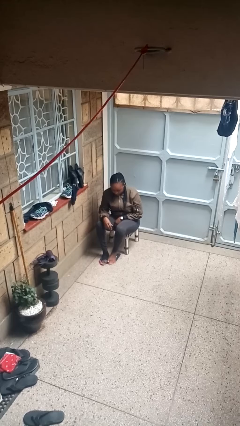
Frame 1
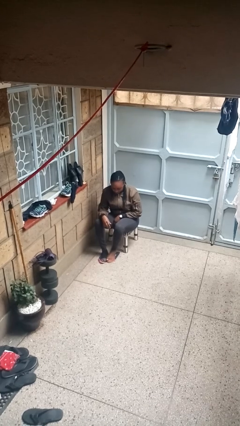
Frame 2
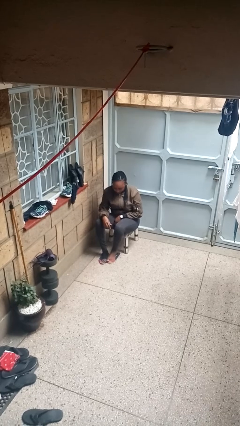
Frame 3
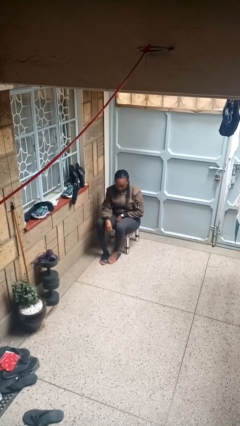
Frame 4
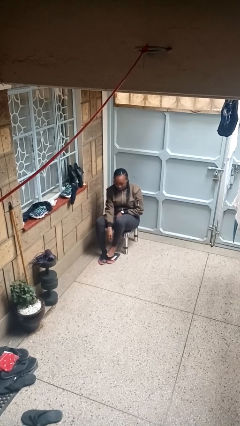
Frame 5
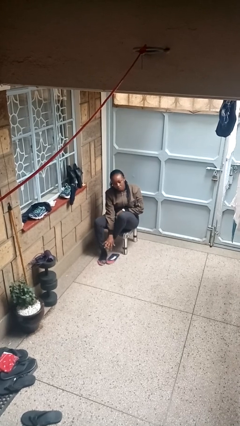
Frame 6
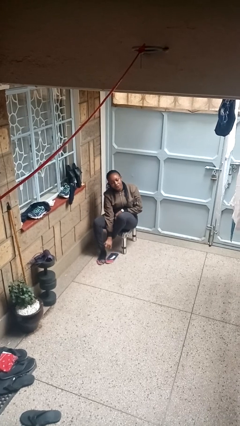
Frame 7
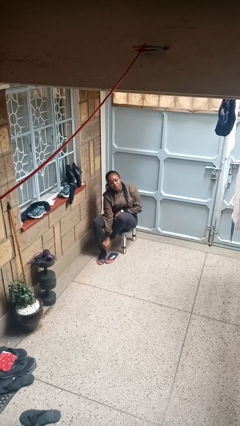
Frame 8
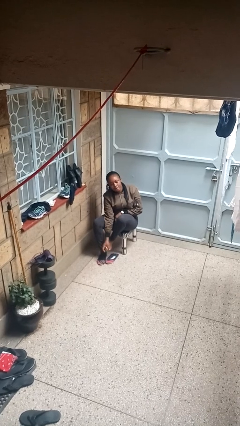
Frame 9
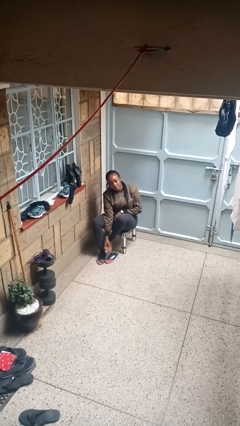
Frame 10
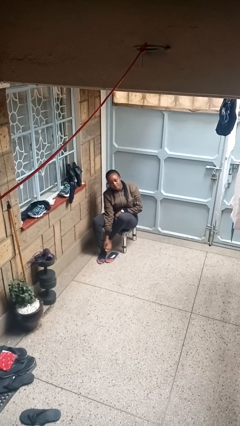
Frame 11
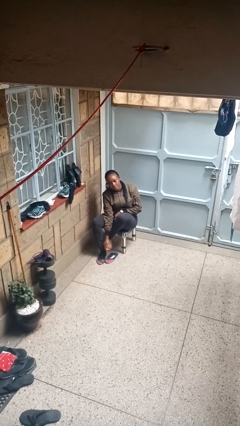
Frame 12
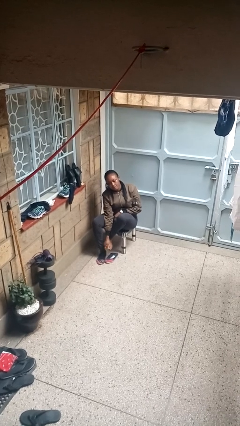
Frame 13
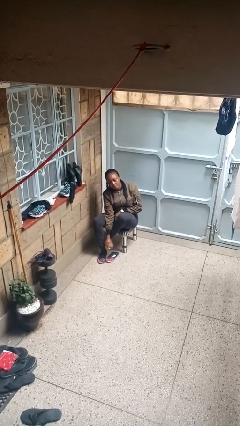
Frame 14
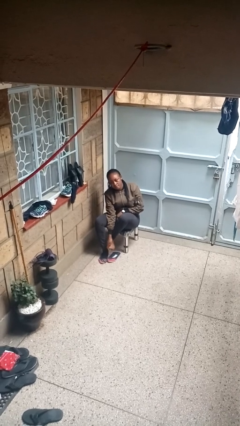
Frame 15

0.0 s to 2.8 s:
person rubs foot

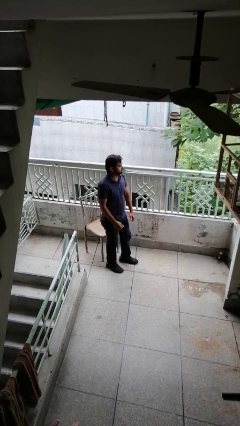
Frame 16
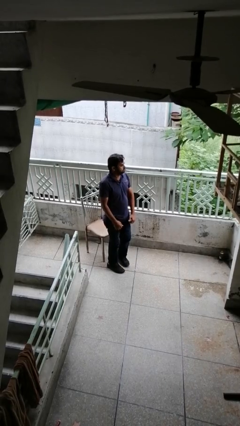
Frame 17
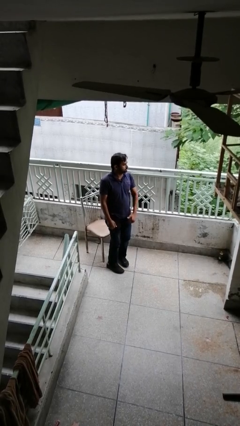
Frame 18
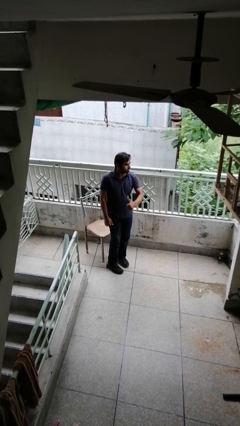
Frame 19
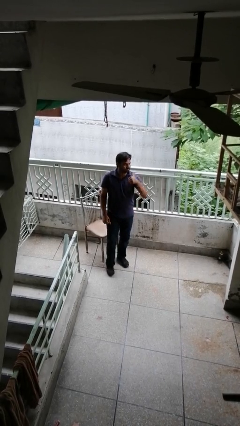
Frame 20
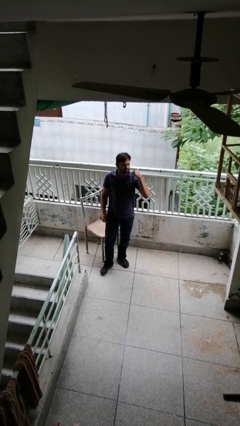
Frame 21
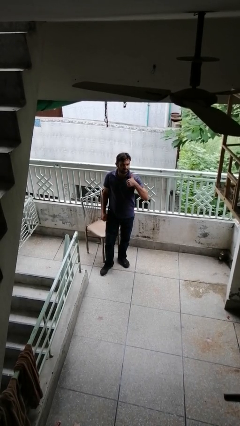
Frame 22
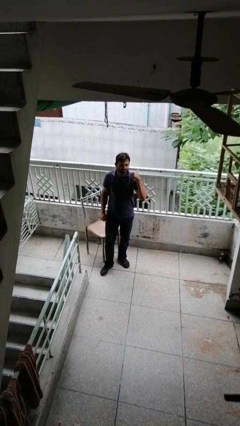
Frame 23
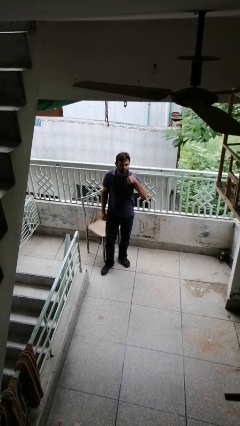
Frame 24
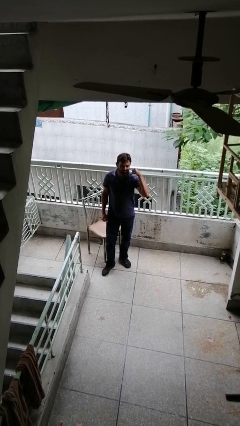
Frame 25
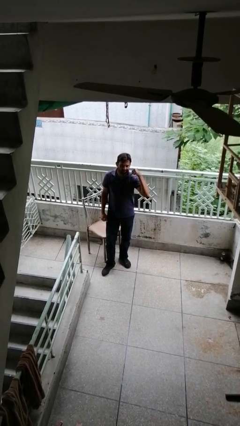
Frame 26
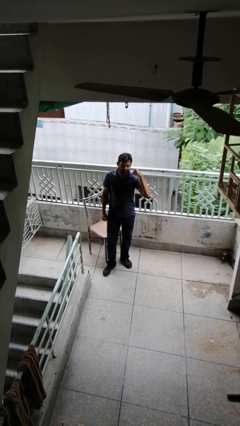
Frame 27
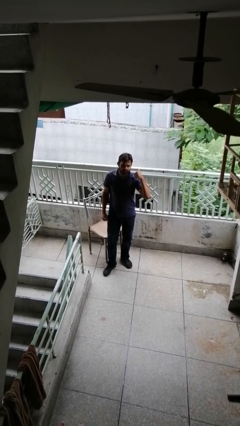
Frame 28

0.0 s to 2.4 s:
person gestures behind me

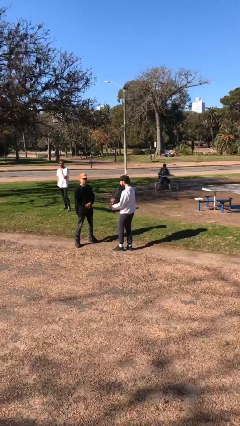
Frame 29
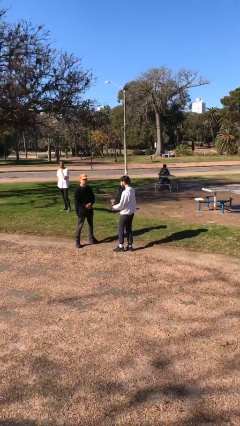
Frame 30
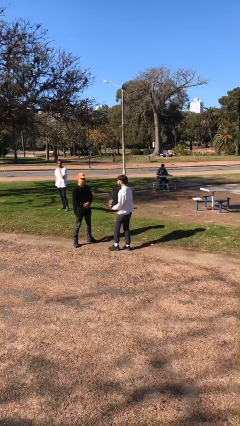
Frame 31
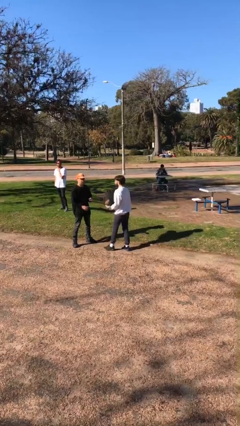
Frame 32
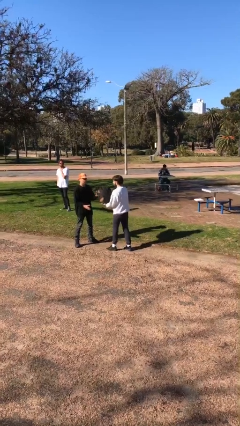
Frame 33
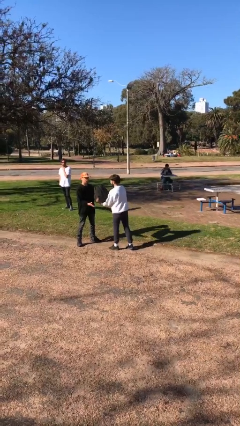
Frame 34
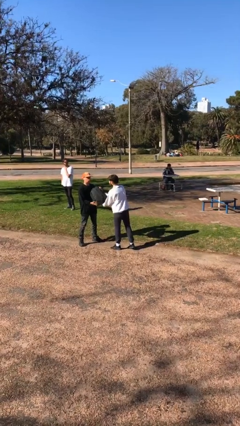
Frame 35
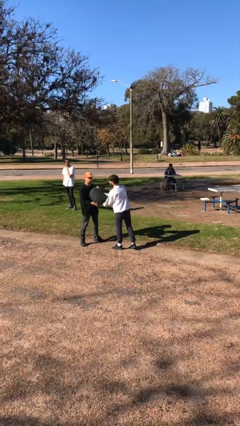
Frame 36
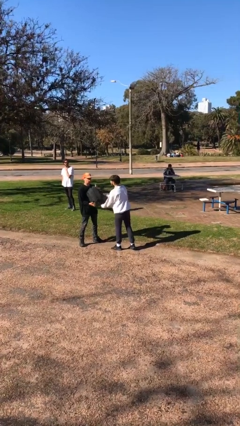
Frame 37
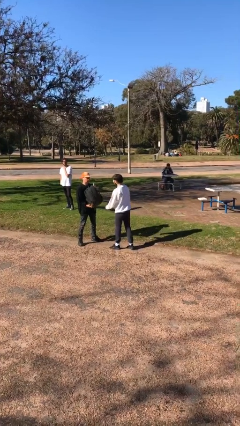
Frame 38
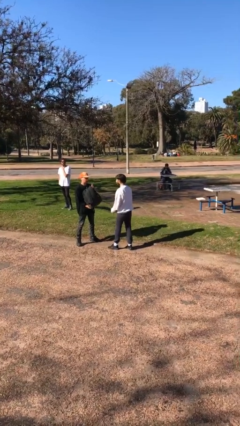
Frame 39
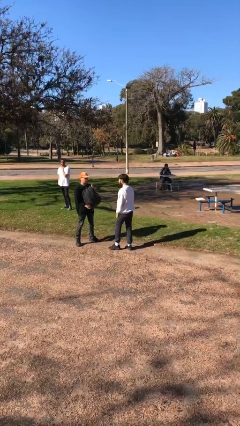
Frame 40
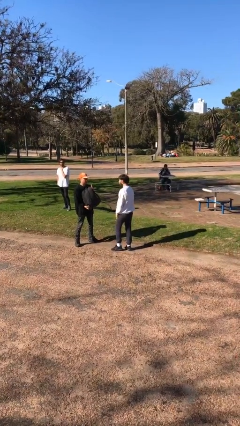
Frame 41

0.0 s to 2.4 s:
person transfers object to person

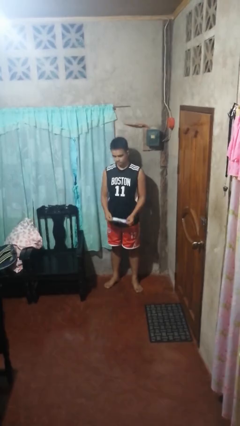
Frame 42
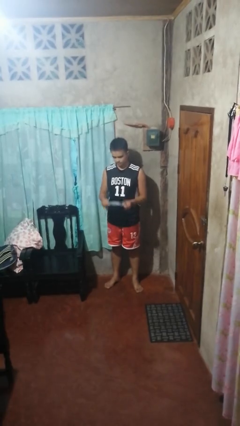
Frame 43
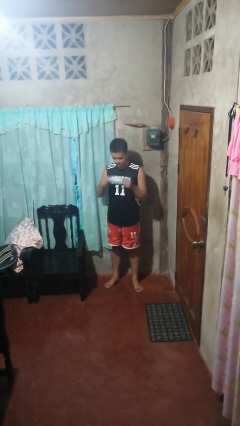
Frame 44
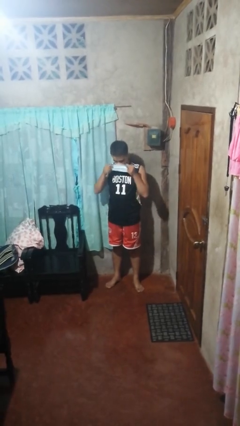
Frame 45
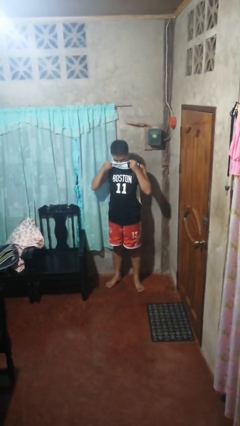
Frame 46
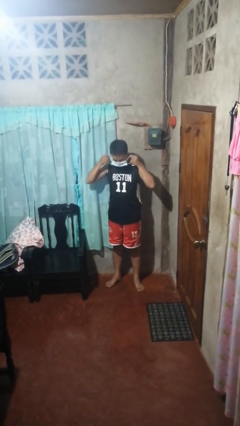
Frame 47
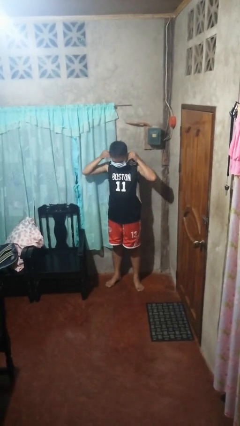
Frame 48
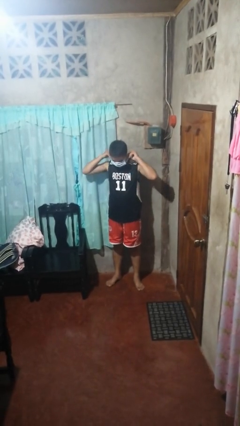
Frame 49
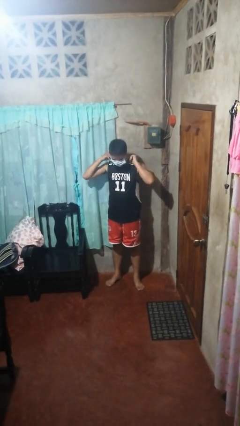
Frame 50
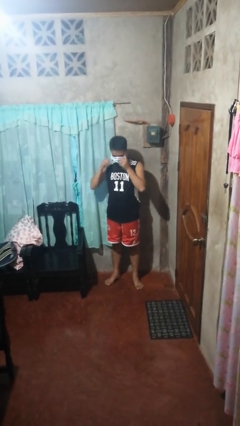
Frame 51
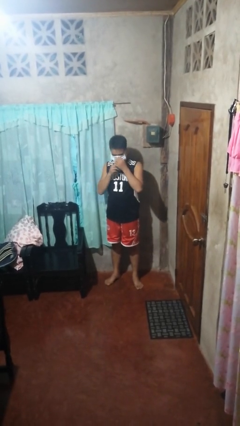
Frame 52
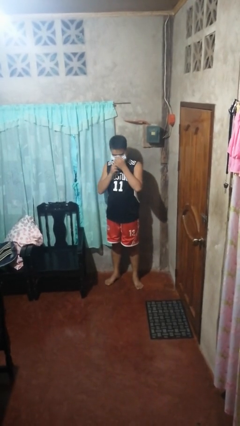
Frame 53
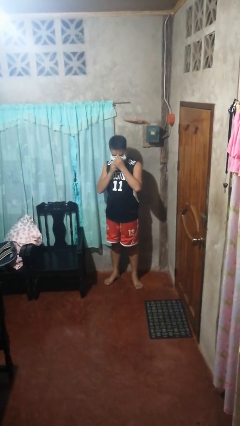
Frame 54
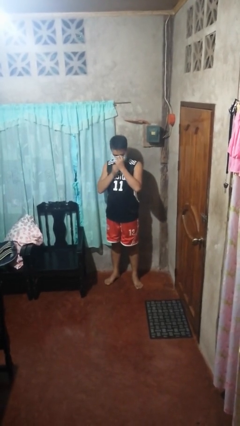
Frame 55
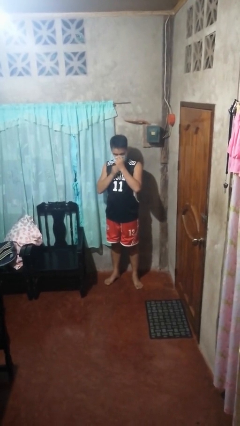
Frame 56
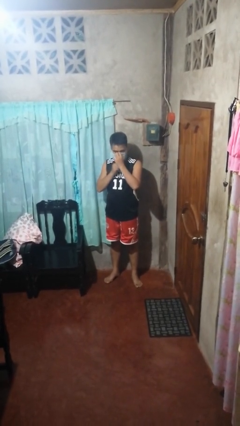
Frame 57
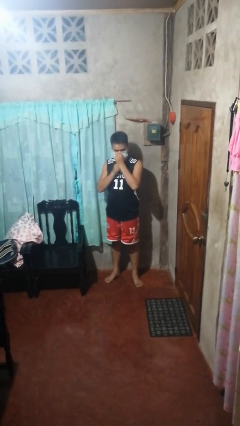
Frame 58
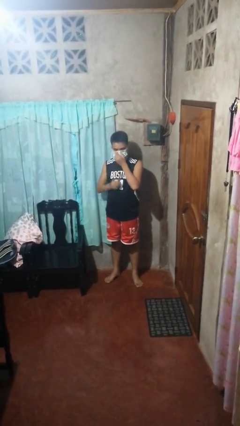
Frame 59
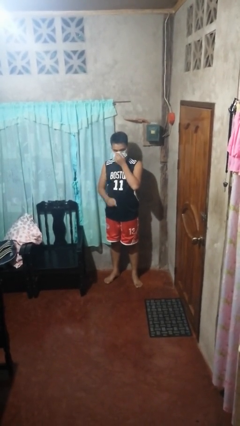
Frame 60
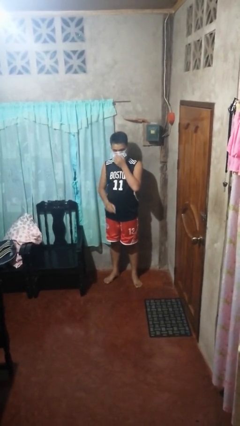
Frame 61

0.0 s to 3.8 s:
person puts on facemask

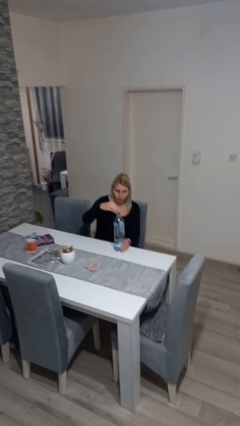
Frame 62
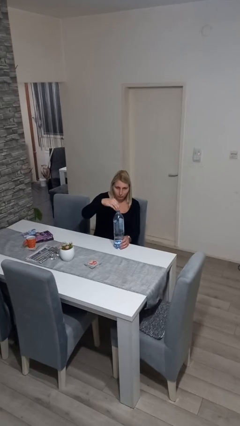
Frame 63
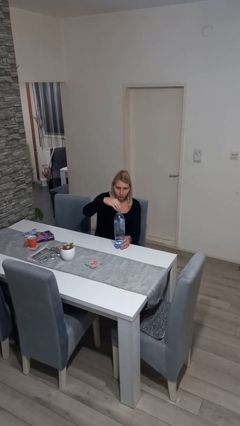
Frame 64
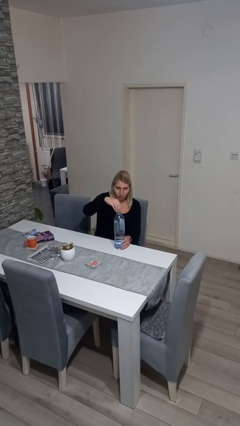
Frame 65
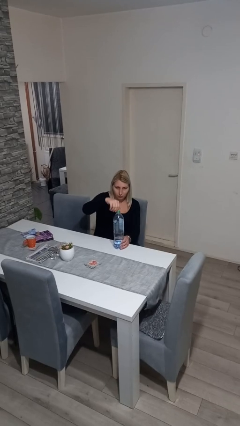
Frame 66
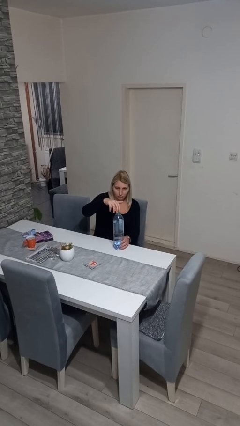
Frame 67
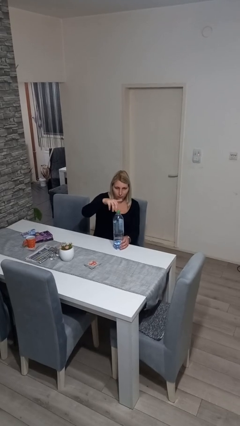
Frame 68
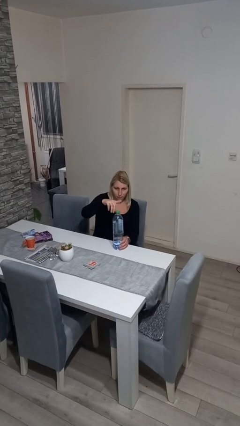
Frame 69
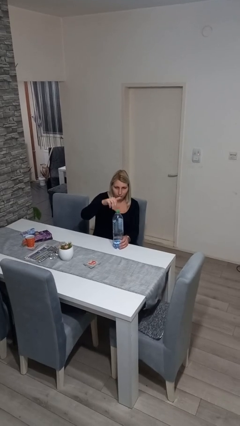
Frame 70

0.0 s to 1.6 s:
person screws lid to bottle

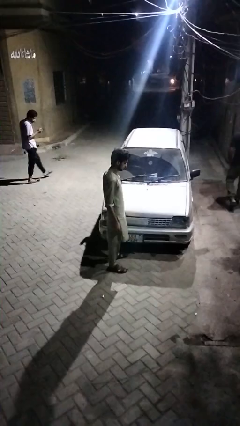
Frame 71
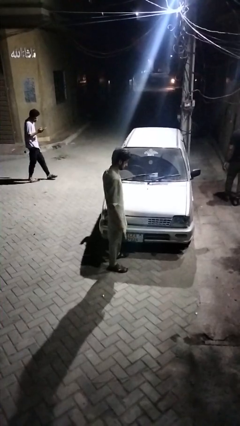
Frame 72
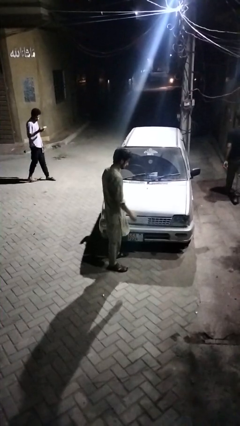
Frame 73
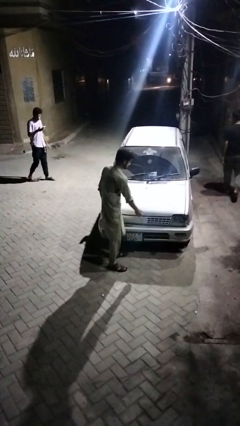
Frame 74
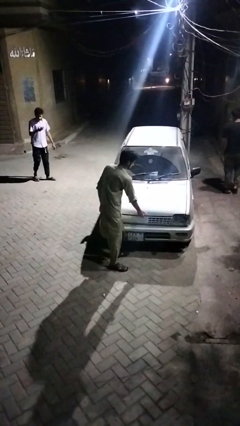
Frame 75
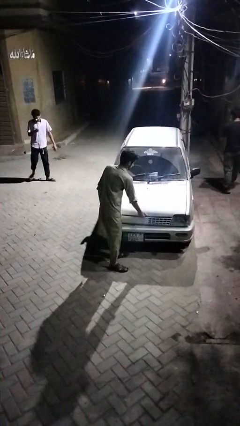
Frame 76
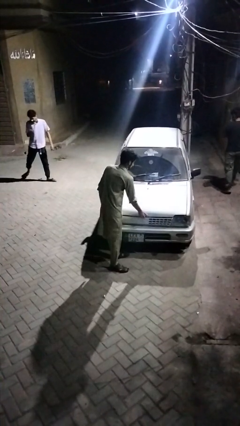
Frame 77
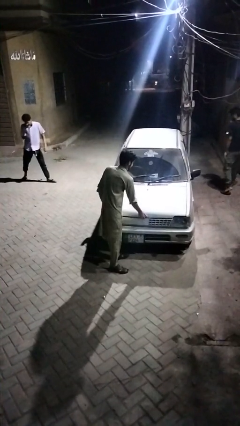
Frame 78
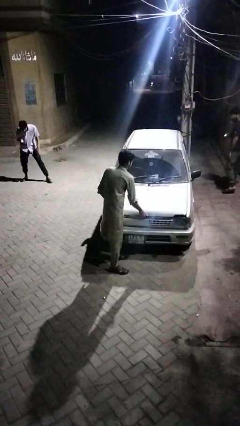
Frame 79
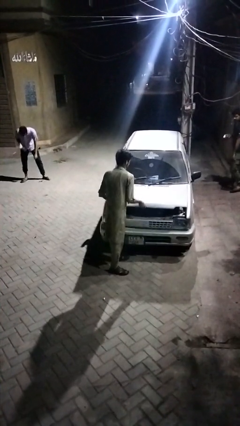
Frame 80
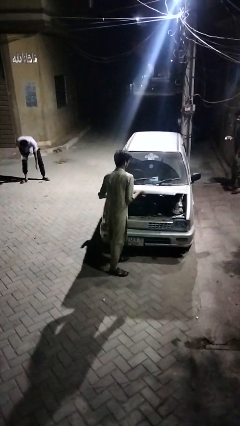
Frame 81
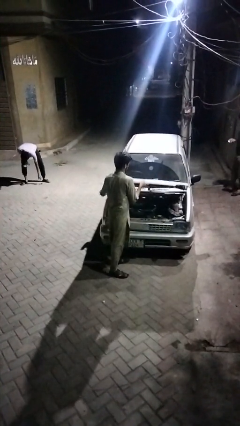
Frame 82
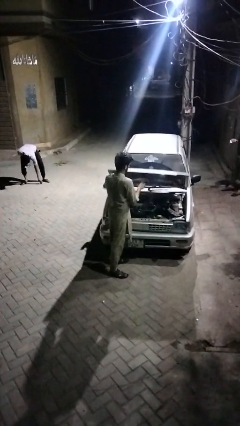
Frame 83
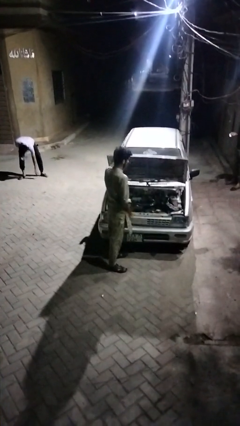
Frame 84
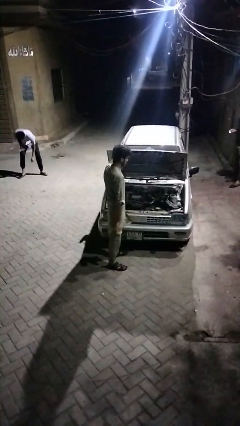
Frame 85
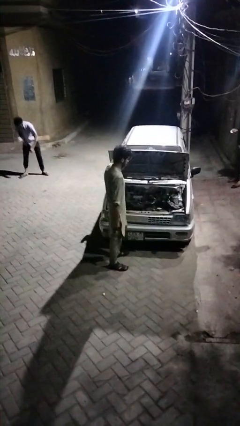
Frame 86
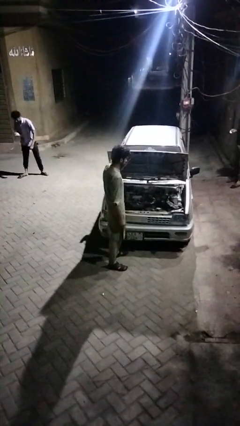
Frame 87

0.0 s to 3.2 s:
person opens car hood

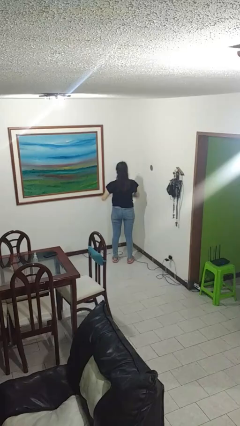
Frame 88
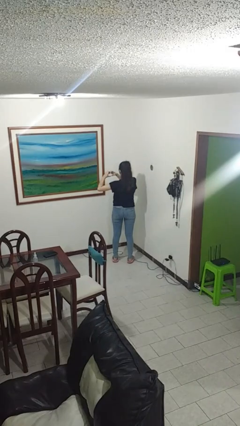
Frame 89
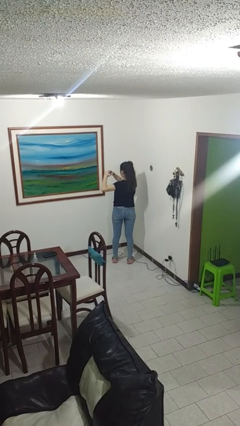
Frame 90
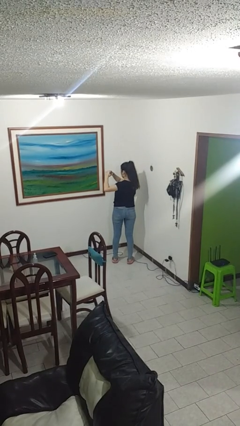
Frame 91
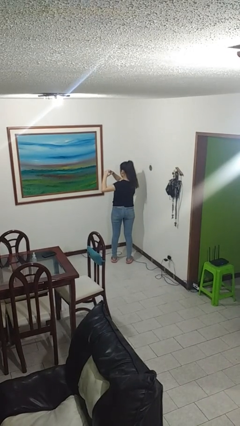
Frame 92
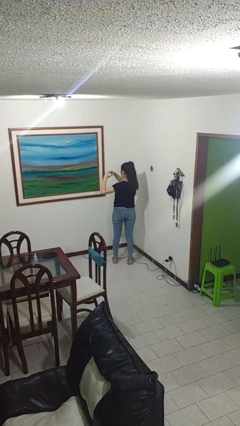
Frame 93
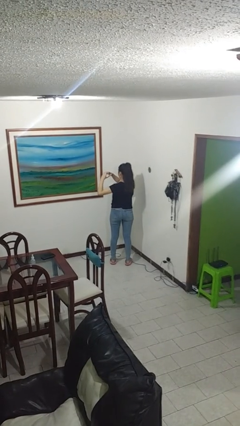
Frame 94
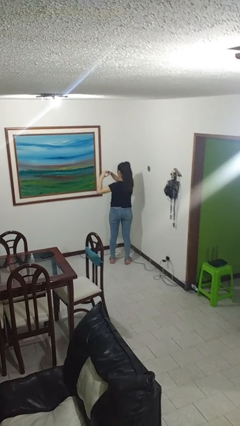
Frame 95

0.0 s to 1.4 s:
person gestures heart
